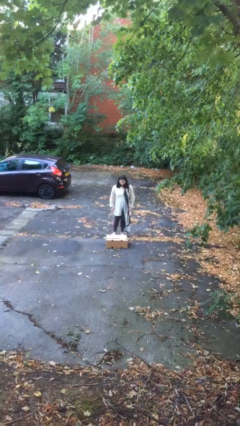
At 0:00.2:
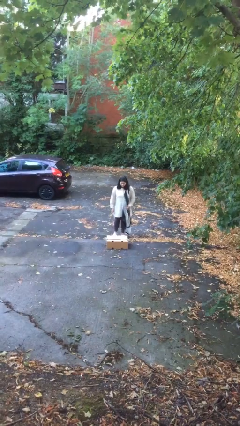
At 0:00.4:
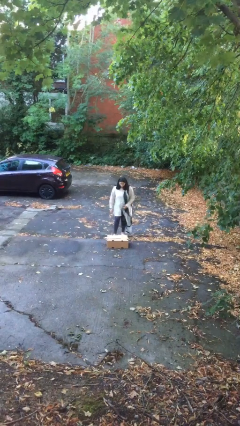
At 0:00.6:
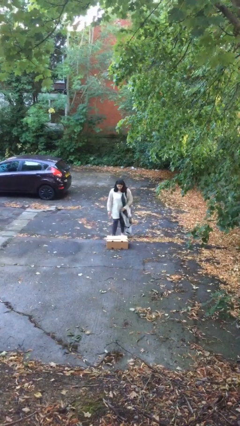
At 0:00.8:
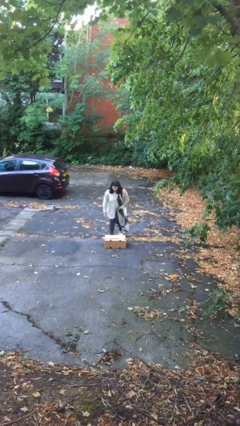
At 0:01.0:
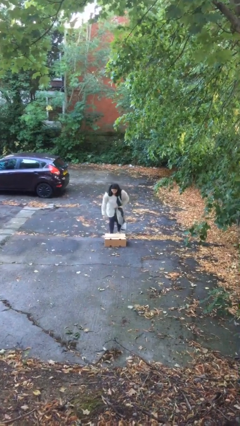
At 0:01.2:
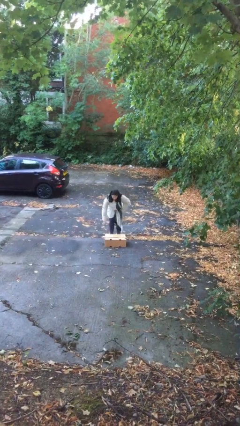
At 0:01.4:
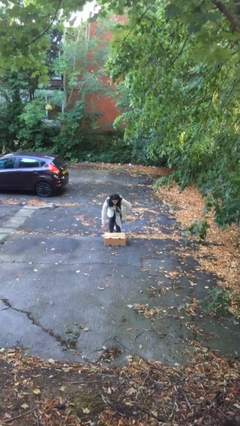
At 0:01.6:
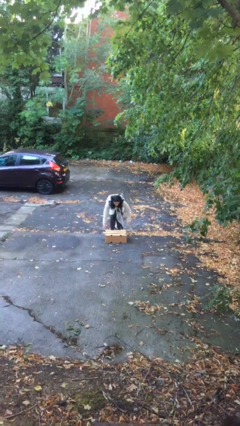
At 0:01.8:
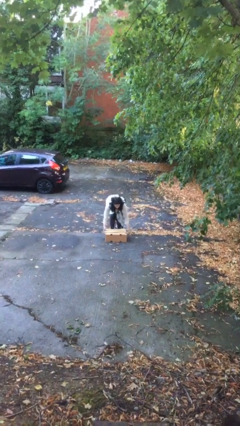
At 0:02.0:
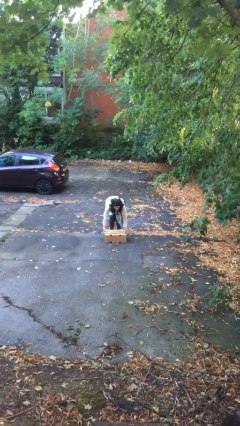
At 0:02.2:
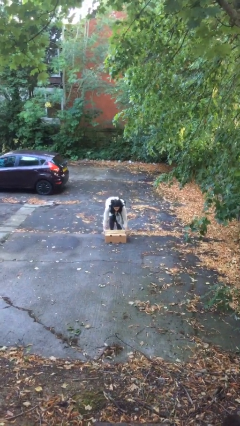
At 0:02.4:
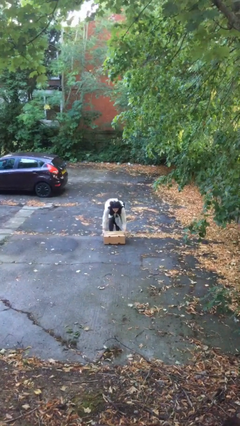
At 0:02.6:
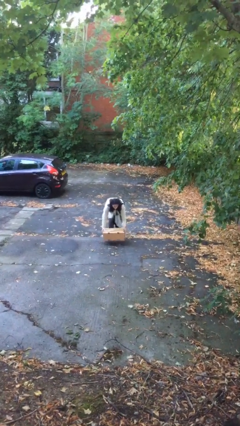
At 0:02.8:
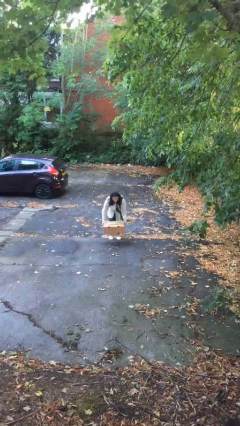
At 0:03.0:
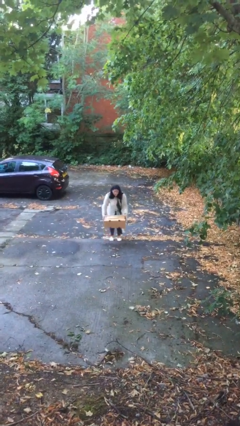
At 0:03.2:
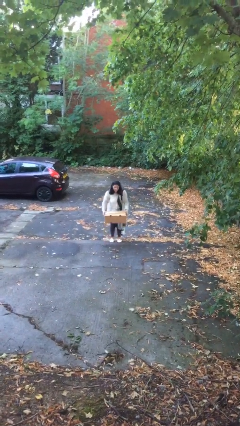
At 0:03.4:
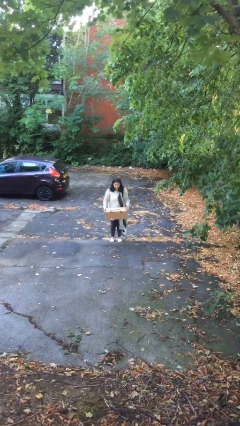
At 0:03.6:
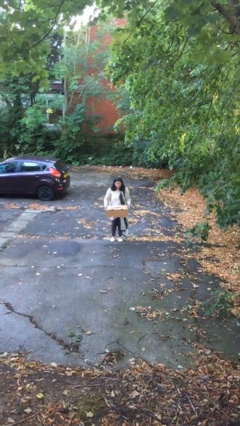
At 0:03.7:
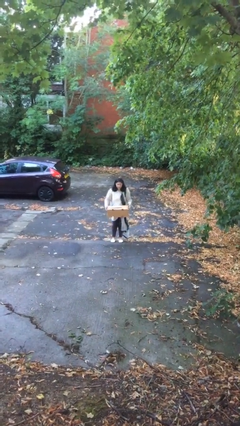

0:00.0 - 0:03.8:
person picks up object from floor

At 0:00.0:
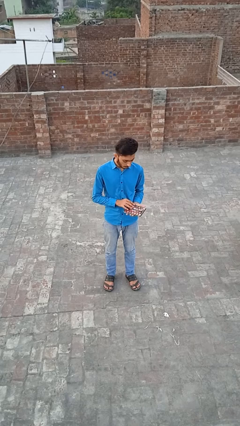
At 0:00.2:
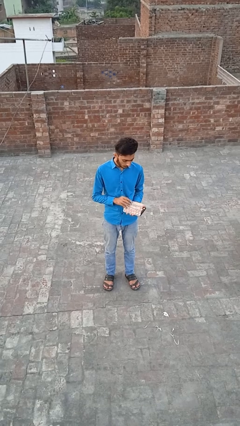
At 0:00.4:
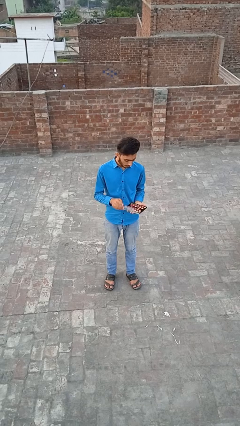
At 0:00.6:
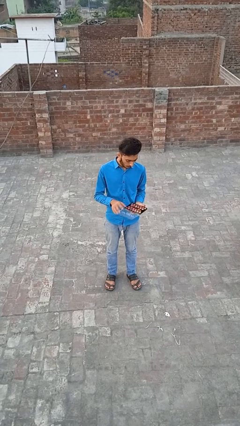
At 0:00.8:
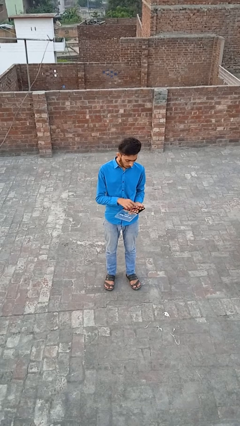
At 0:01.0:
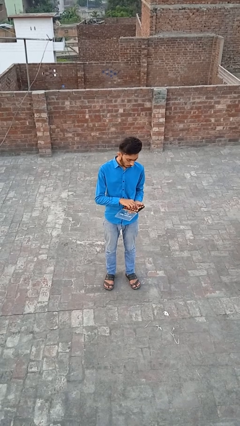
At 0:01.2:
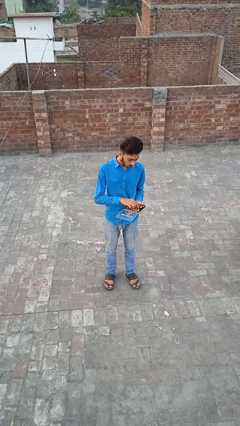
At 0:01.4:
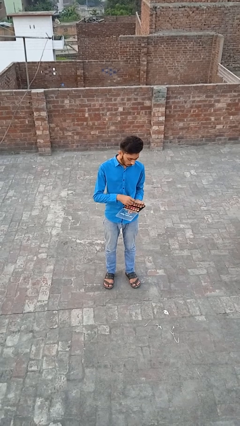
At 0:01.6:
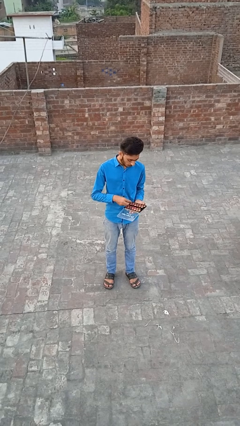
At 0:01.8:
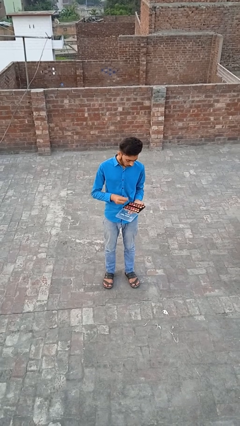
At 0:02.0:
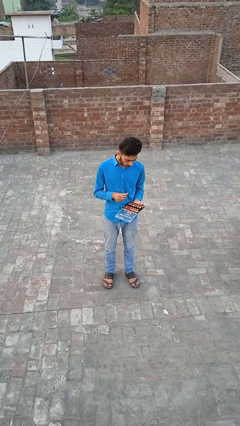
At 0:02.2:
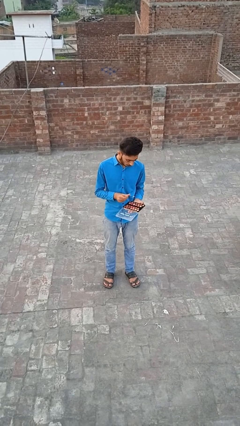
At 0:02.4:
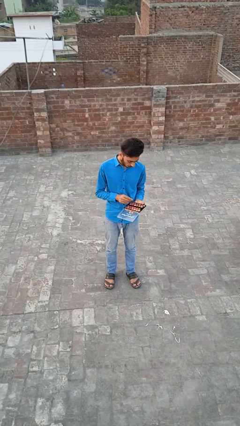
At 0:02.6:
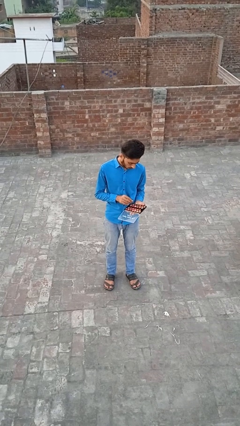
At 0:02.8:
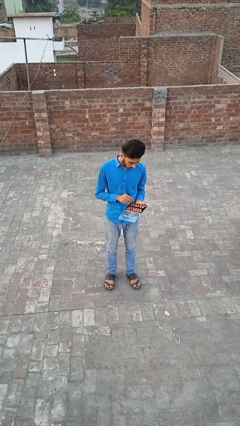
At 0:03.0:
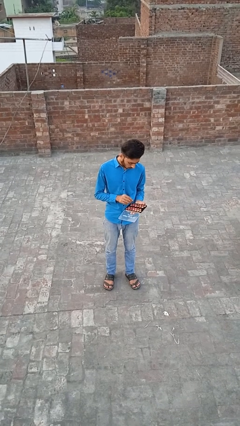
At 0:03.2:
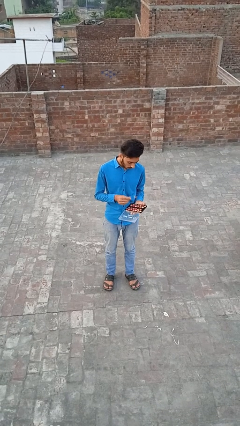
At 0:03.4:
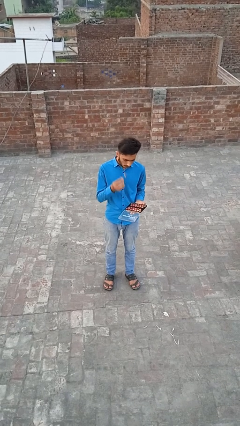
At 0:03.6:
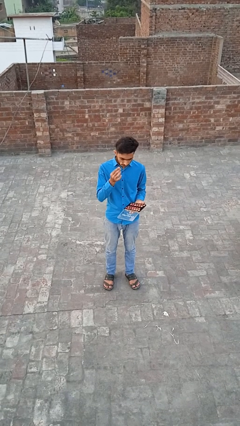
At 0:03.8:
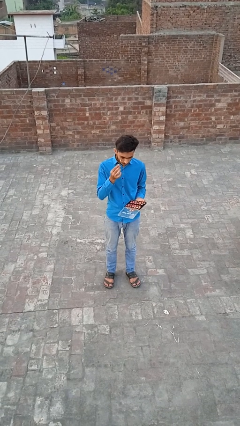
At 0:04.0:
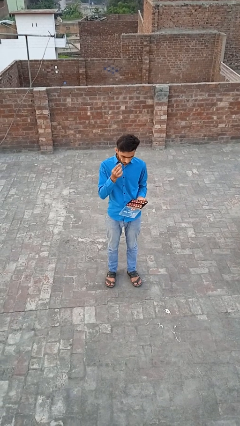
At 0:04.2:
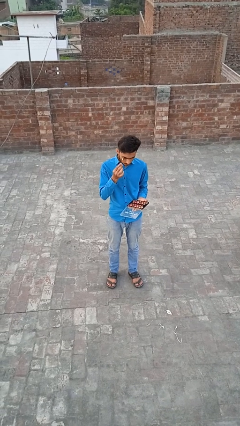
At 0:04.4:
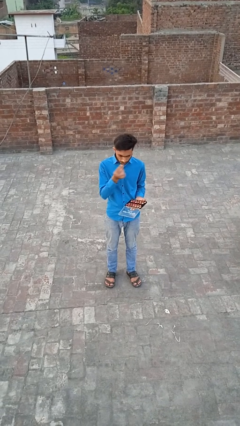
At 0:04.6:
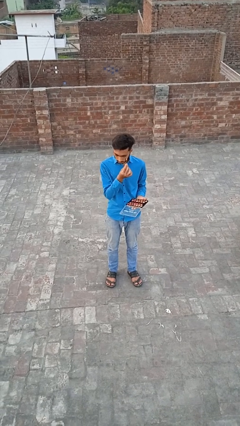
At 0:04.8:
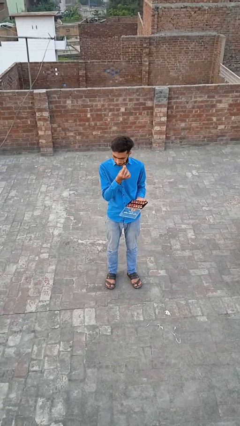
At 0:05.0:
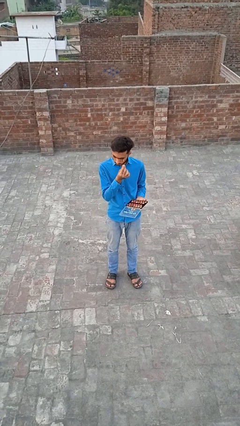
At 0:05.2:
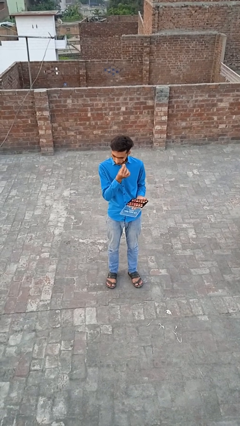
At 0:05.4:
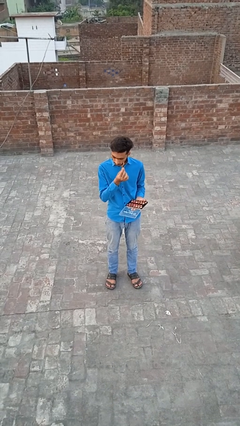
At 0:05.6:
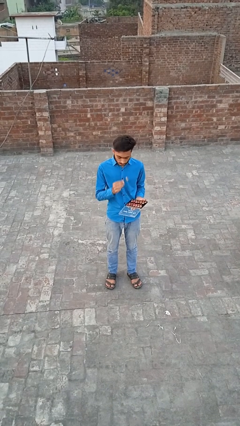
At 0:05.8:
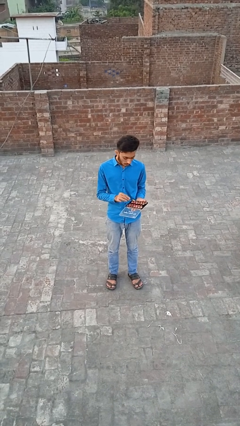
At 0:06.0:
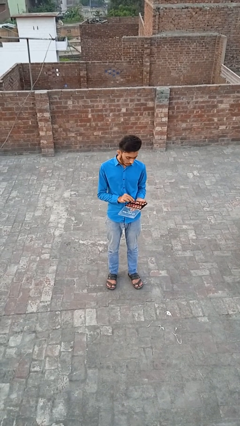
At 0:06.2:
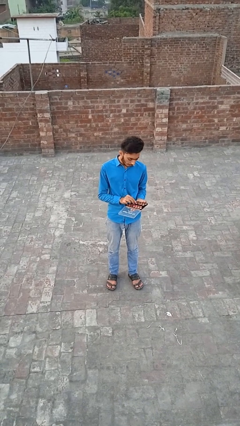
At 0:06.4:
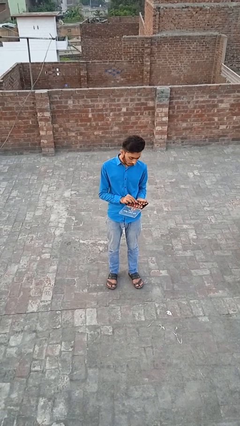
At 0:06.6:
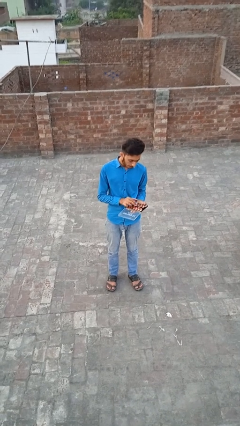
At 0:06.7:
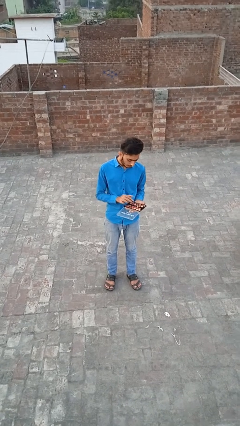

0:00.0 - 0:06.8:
person applies eye makeup

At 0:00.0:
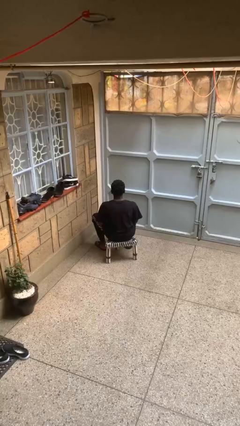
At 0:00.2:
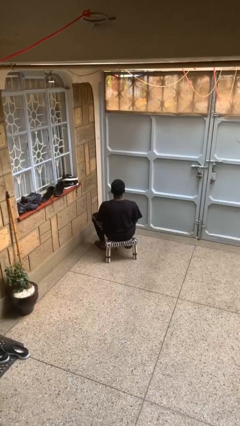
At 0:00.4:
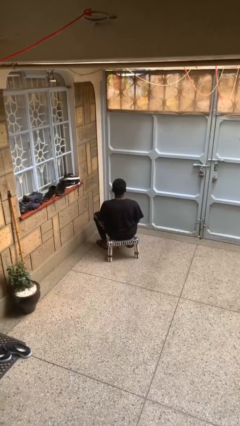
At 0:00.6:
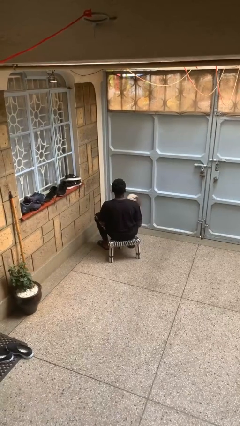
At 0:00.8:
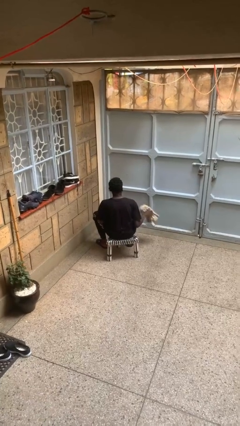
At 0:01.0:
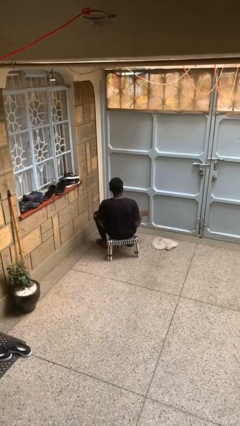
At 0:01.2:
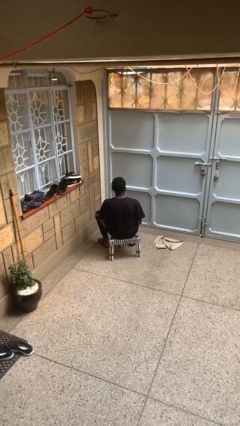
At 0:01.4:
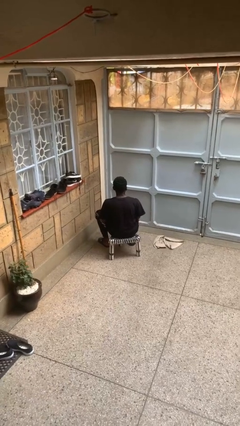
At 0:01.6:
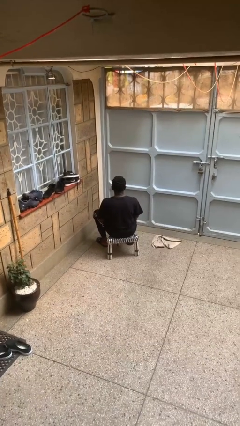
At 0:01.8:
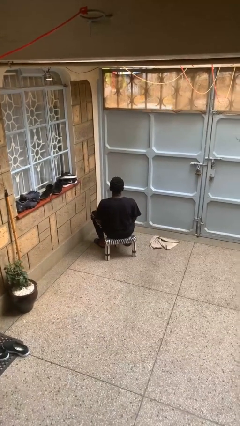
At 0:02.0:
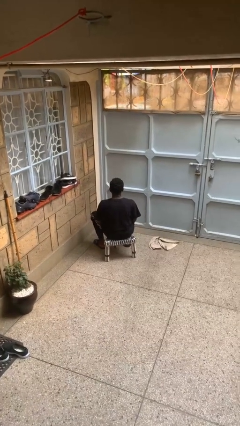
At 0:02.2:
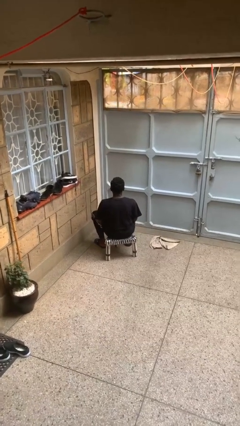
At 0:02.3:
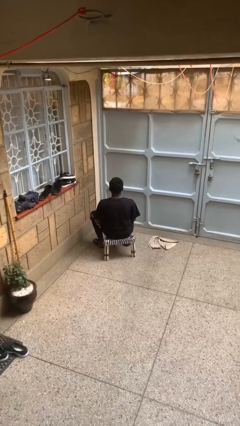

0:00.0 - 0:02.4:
person throws object to ground

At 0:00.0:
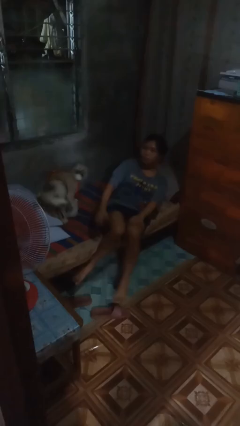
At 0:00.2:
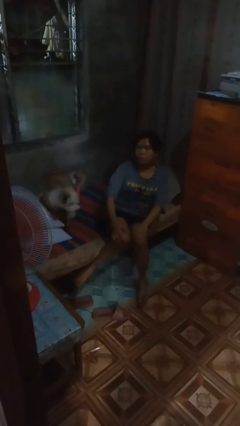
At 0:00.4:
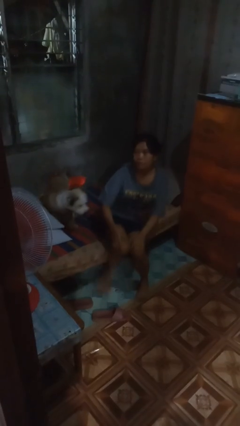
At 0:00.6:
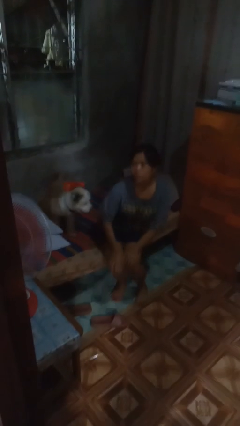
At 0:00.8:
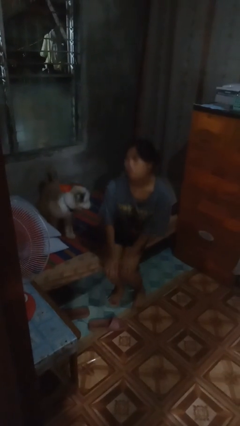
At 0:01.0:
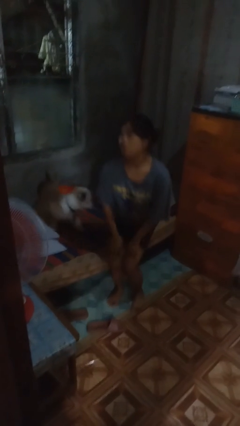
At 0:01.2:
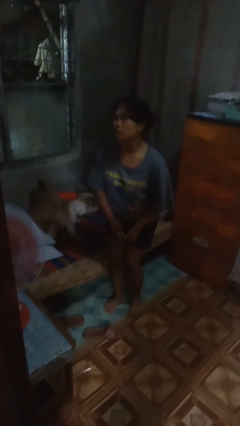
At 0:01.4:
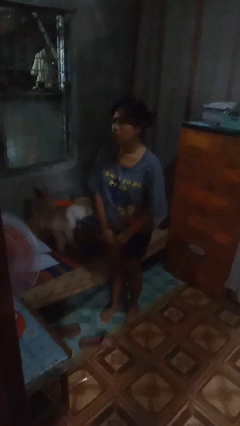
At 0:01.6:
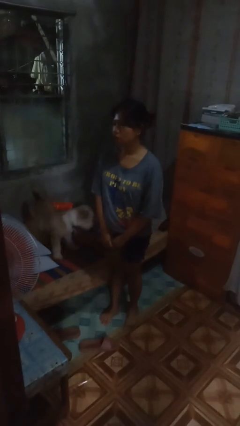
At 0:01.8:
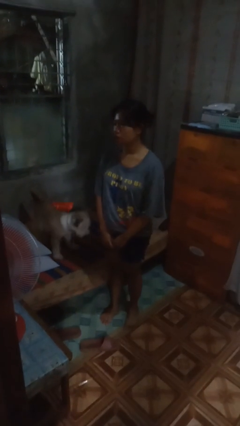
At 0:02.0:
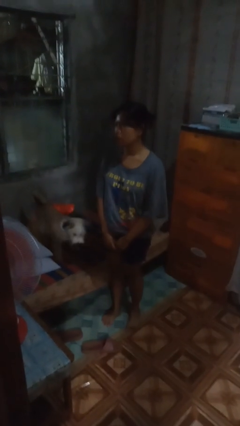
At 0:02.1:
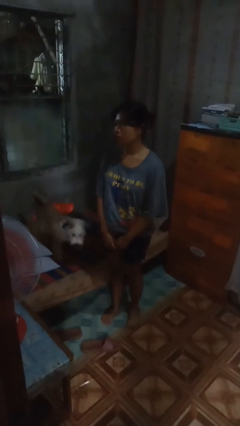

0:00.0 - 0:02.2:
person stands up

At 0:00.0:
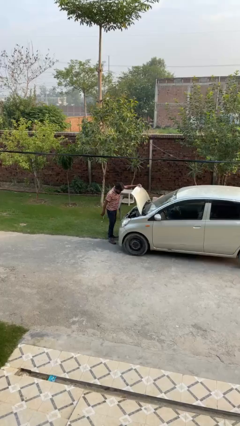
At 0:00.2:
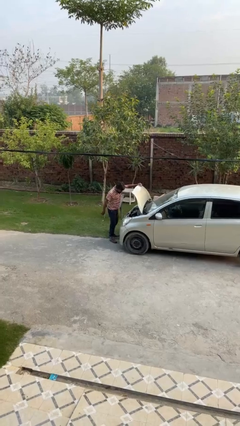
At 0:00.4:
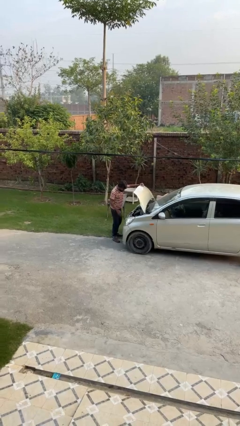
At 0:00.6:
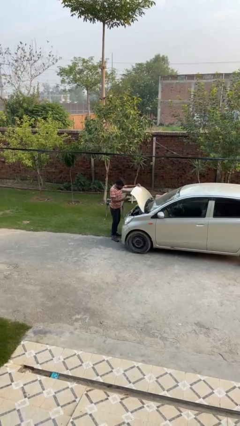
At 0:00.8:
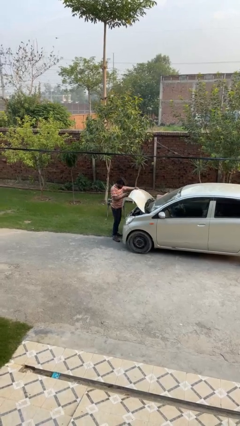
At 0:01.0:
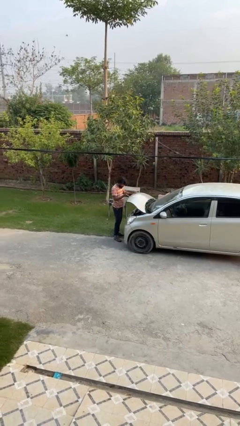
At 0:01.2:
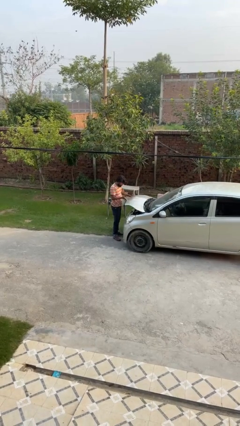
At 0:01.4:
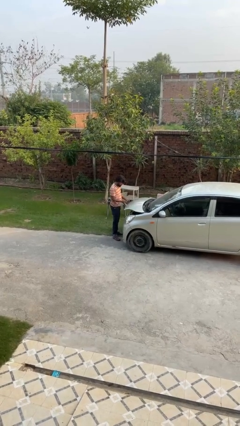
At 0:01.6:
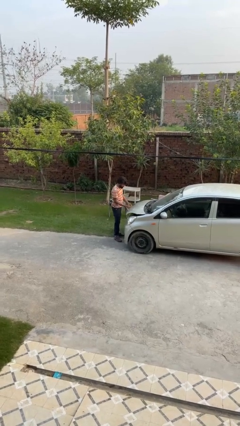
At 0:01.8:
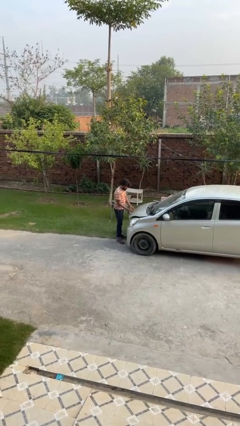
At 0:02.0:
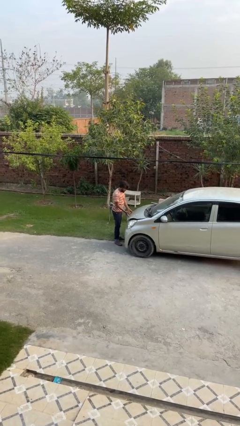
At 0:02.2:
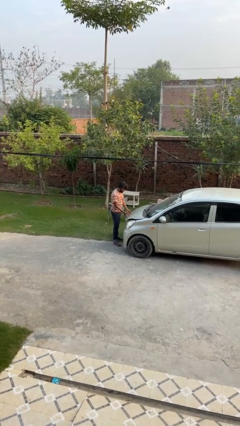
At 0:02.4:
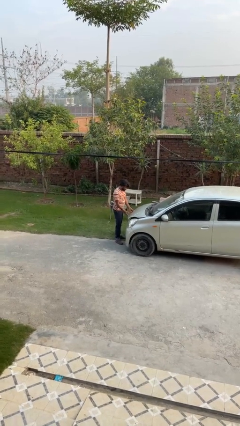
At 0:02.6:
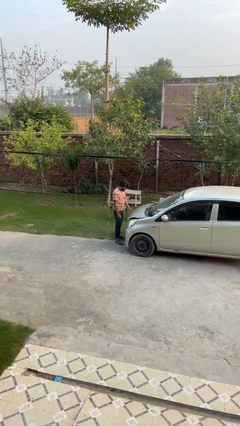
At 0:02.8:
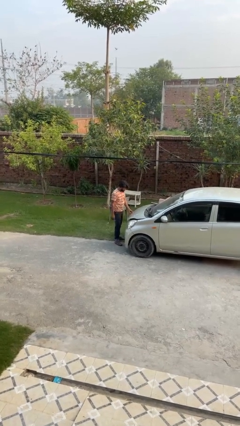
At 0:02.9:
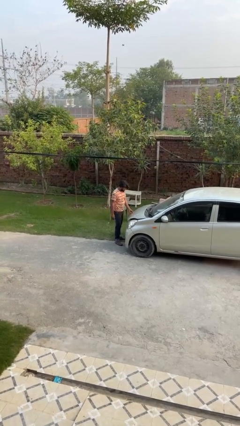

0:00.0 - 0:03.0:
person closes car hood
